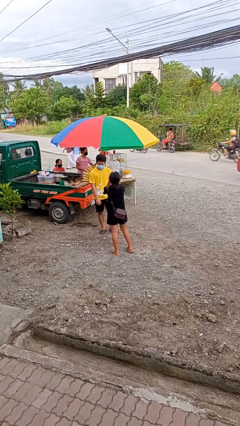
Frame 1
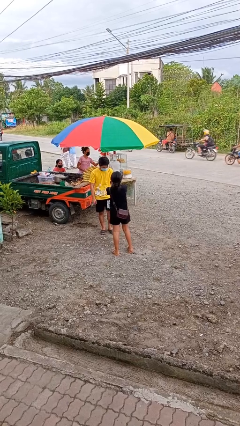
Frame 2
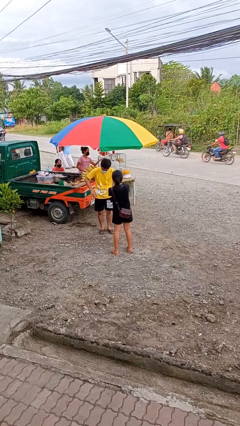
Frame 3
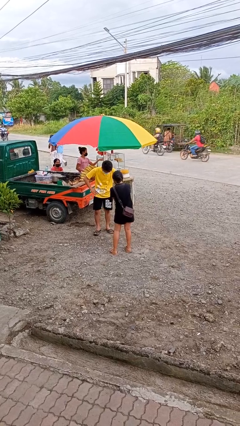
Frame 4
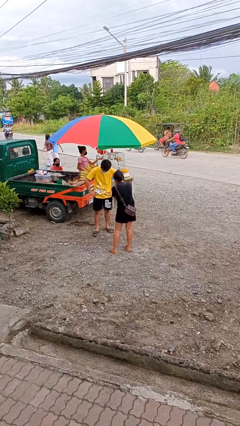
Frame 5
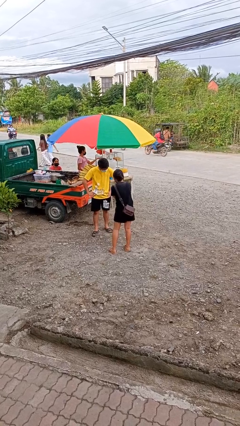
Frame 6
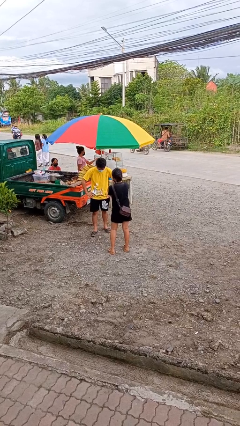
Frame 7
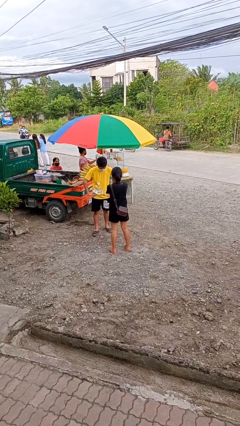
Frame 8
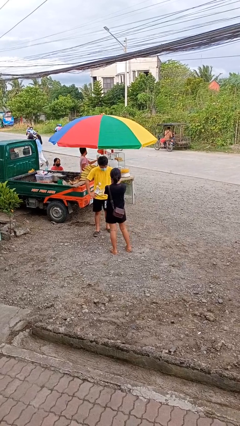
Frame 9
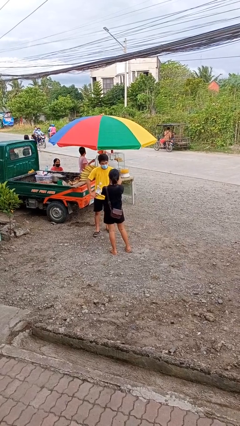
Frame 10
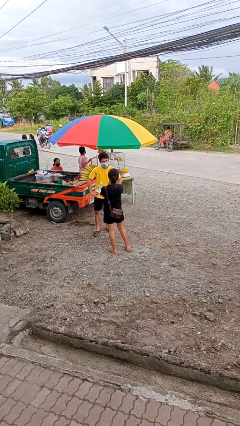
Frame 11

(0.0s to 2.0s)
person laughs with person

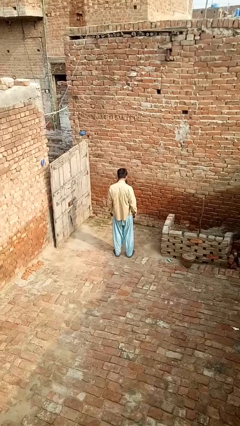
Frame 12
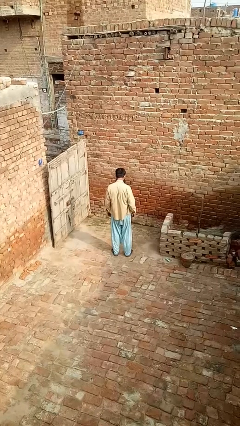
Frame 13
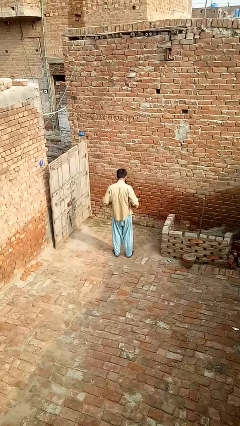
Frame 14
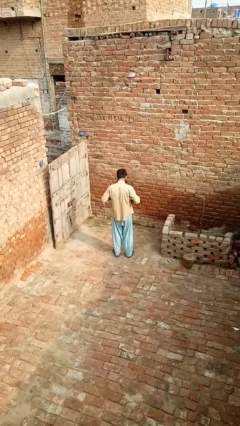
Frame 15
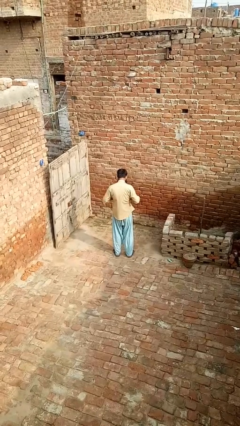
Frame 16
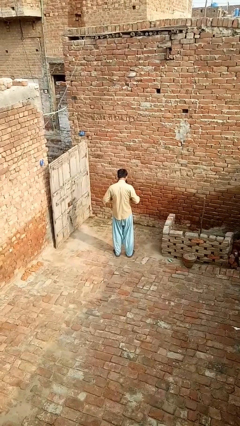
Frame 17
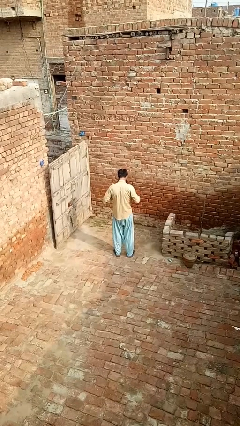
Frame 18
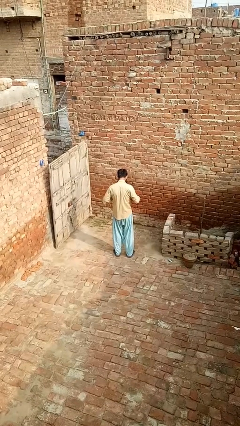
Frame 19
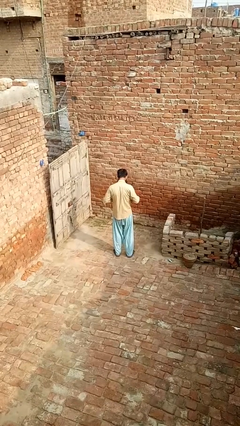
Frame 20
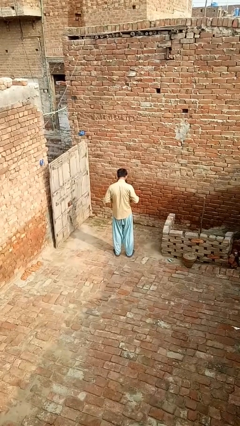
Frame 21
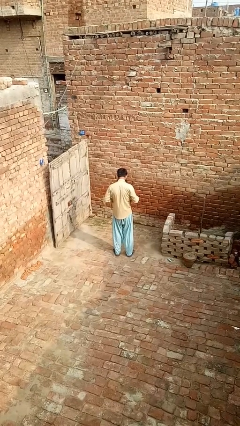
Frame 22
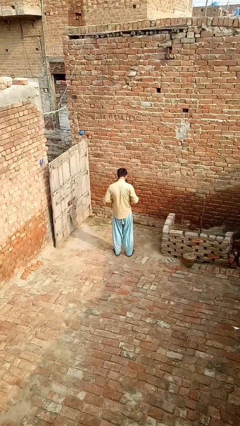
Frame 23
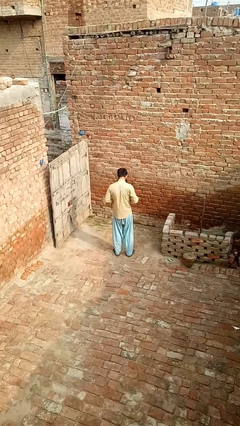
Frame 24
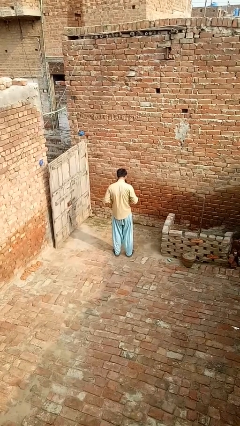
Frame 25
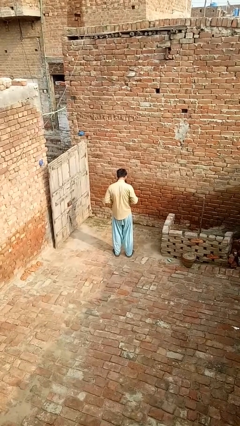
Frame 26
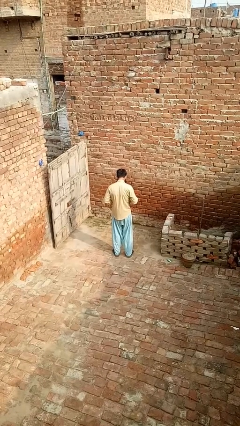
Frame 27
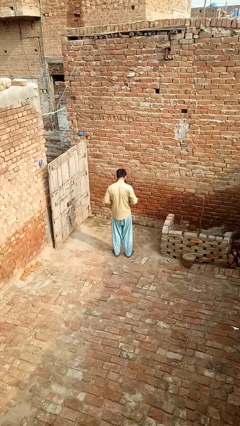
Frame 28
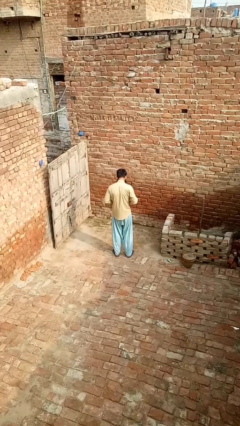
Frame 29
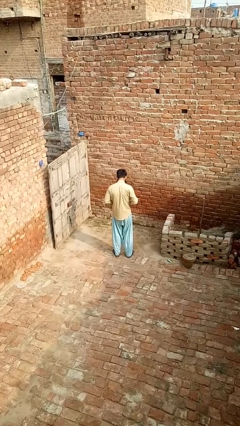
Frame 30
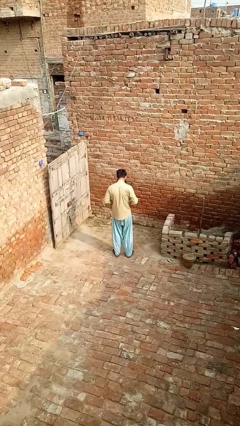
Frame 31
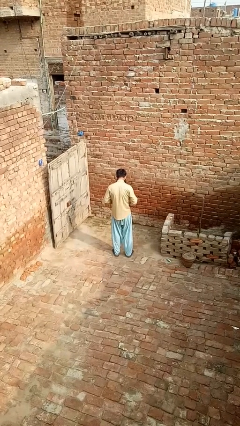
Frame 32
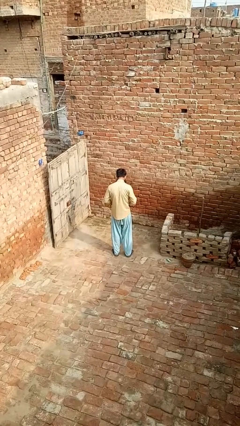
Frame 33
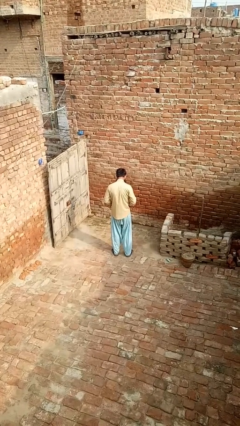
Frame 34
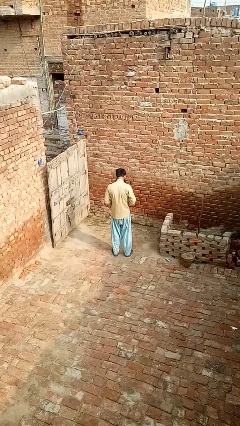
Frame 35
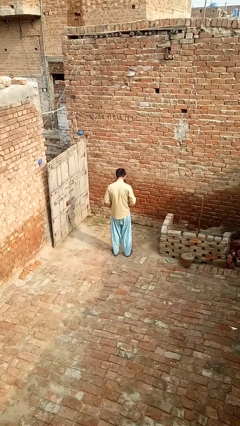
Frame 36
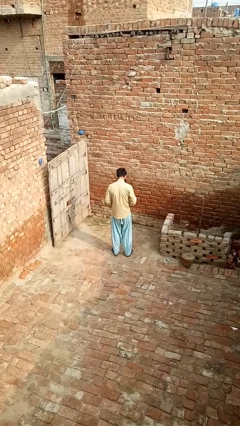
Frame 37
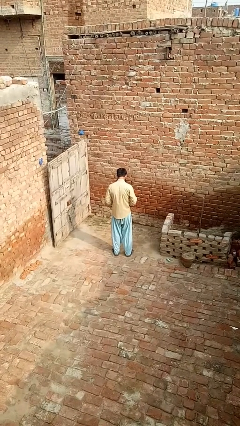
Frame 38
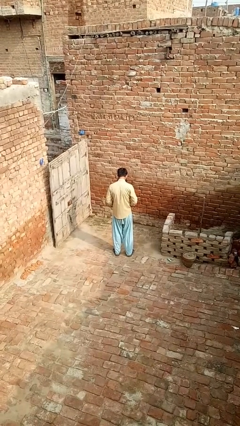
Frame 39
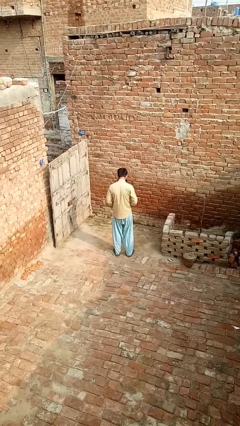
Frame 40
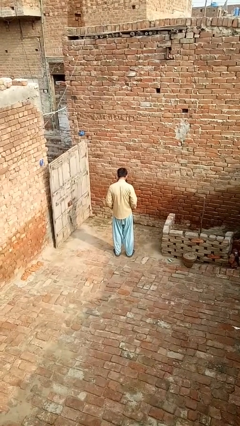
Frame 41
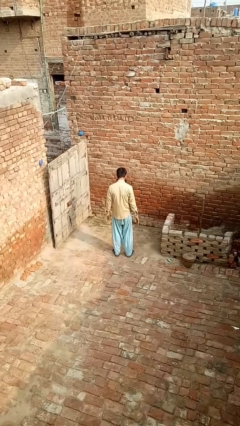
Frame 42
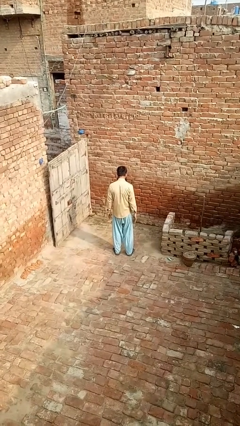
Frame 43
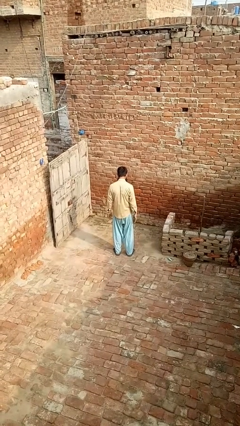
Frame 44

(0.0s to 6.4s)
person buttons shirt

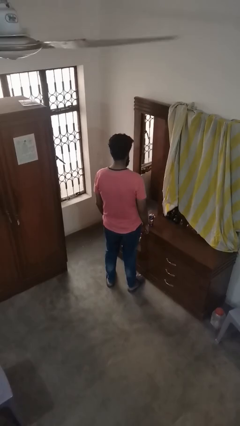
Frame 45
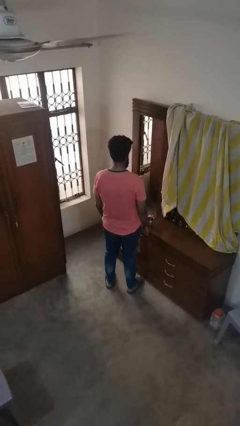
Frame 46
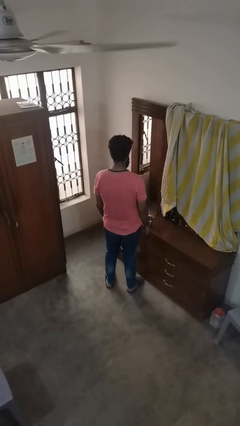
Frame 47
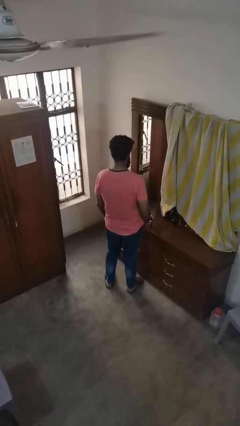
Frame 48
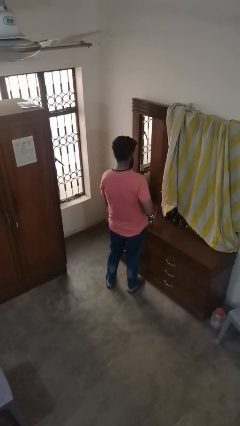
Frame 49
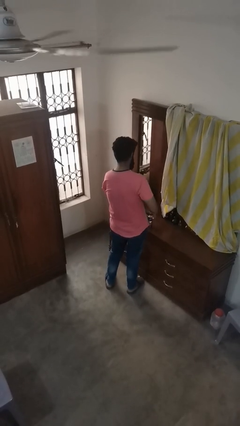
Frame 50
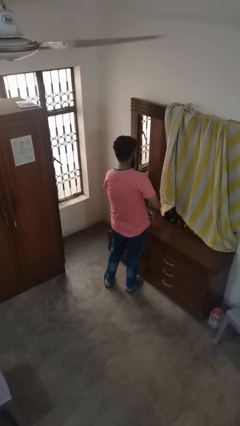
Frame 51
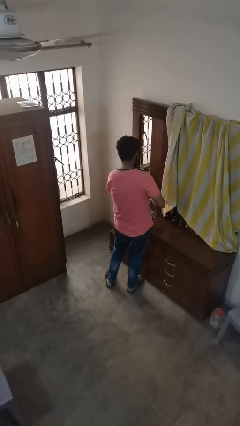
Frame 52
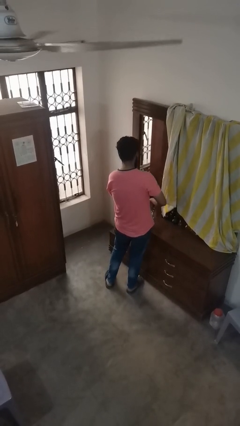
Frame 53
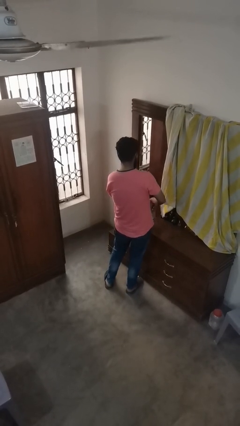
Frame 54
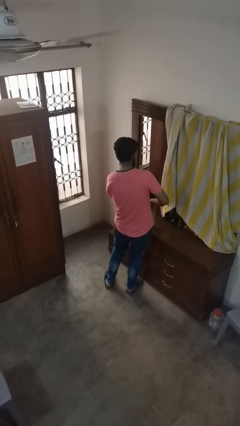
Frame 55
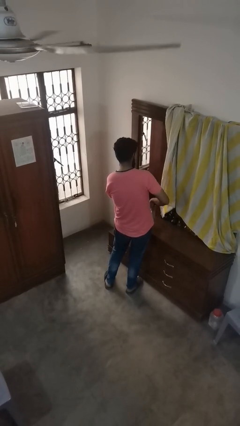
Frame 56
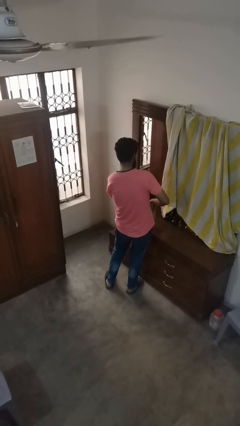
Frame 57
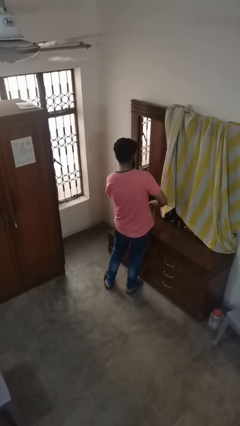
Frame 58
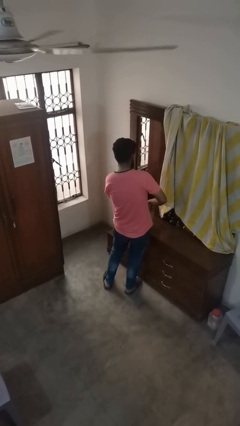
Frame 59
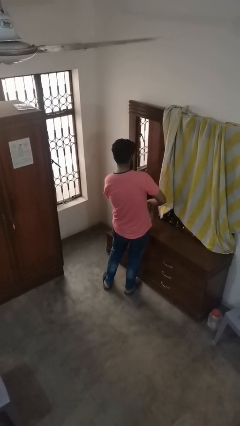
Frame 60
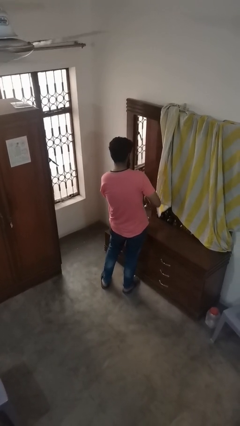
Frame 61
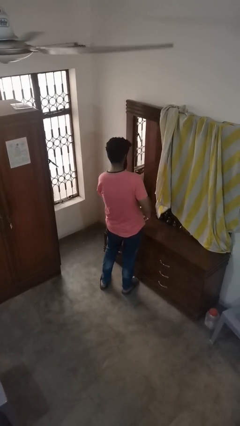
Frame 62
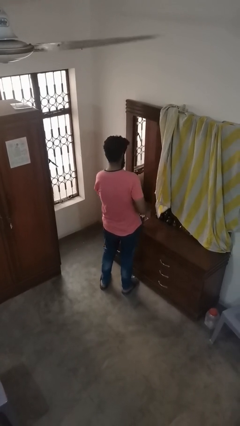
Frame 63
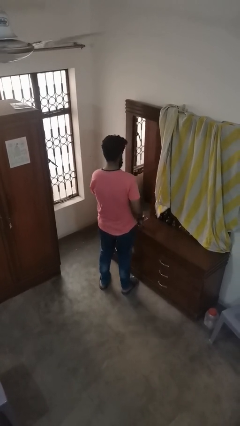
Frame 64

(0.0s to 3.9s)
person opens can with can opener

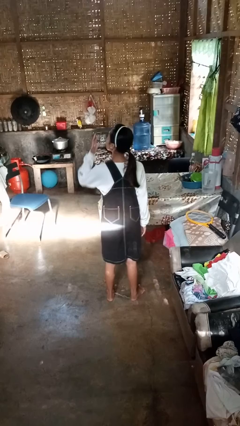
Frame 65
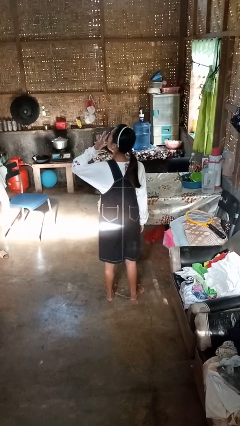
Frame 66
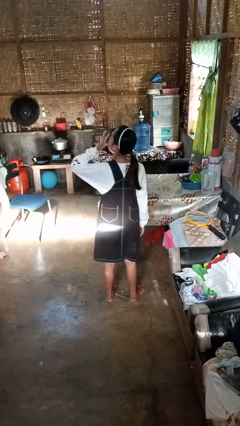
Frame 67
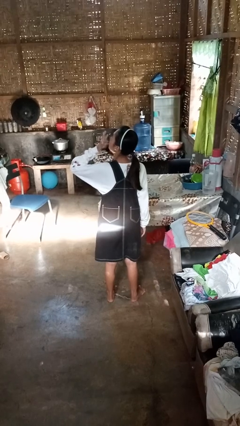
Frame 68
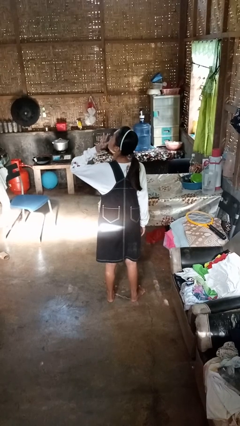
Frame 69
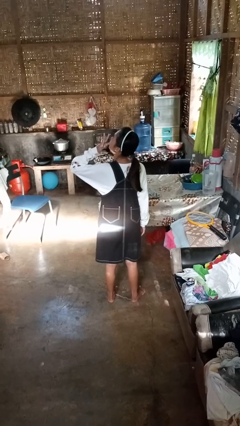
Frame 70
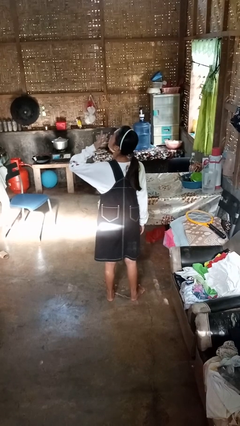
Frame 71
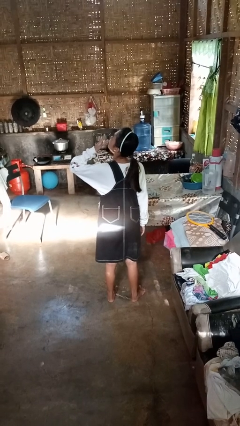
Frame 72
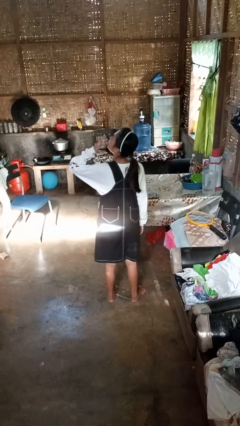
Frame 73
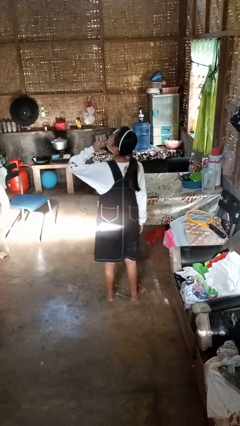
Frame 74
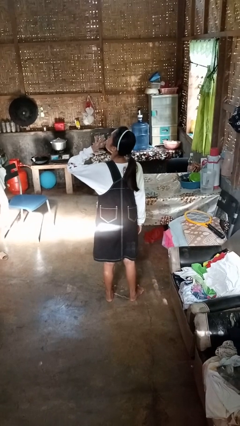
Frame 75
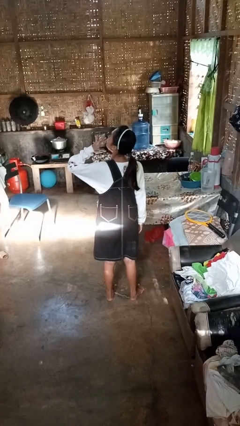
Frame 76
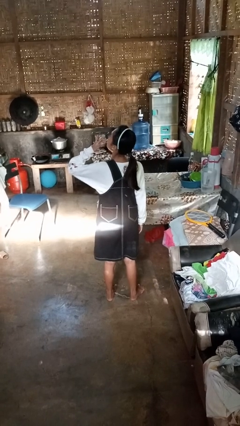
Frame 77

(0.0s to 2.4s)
person licks fingers

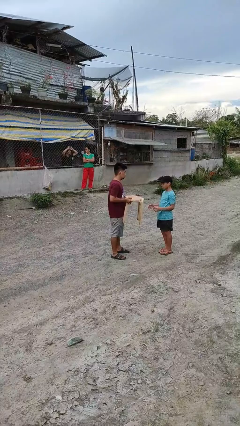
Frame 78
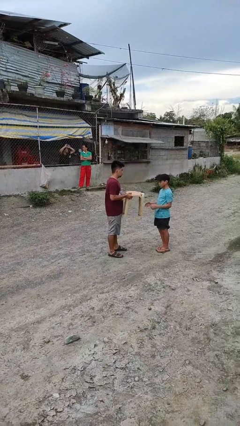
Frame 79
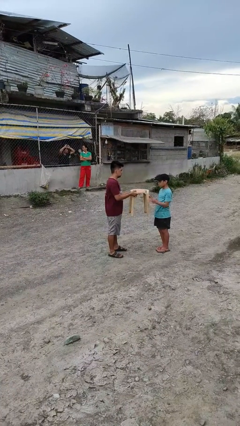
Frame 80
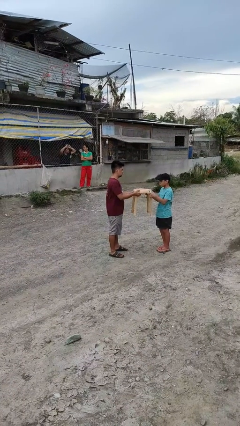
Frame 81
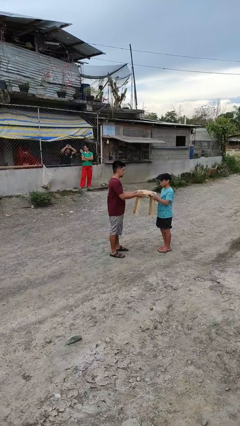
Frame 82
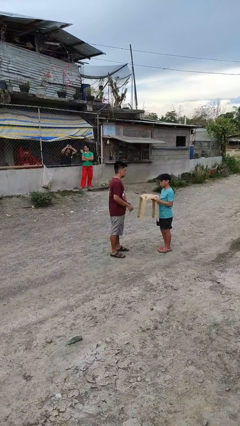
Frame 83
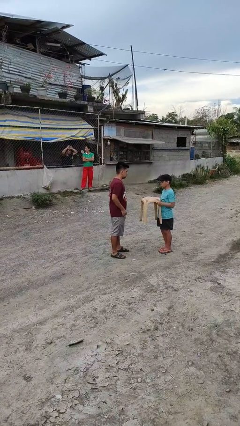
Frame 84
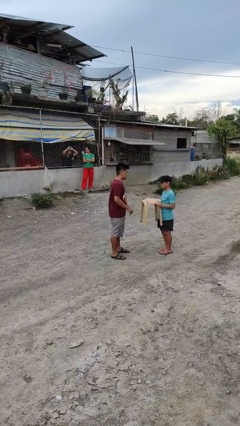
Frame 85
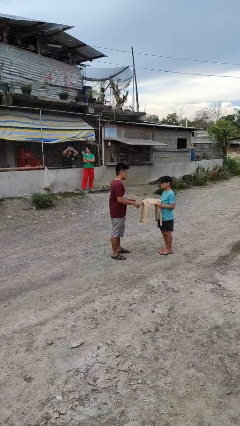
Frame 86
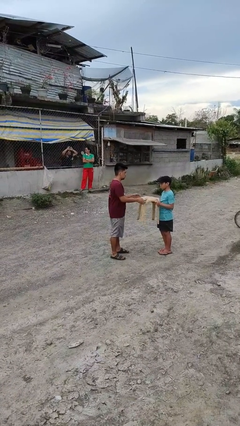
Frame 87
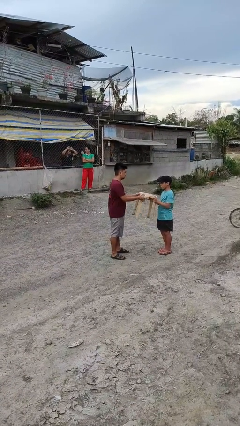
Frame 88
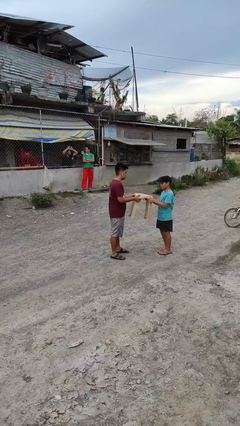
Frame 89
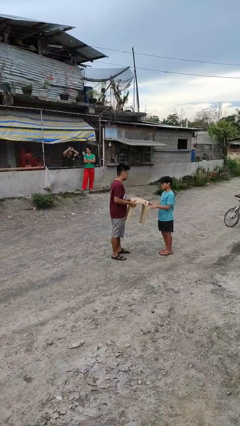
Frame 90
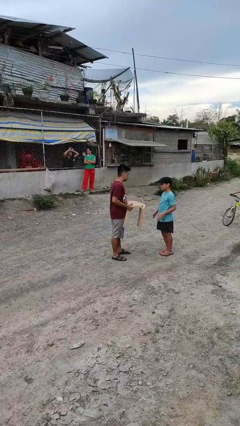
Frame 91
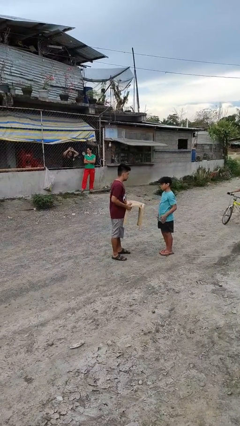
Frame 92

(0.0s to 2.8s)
person transfers object to person

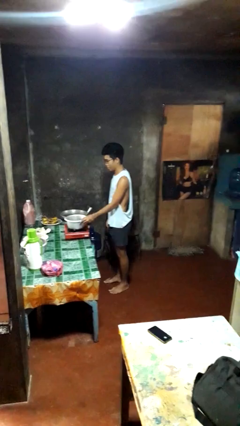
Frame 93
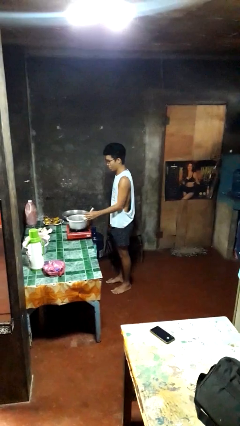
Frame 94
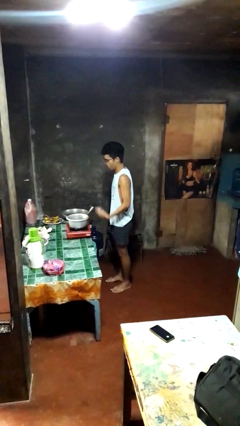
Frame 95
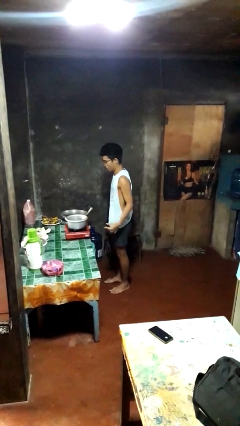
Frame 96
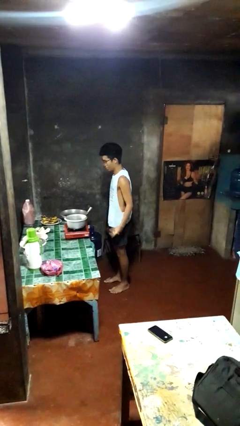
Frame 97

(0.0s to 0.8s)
person burns hand
